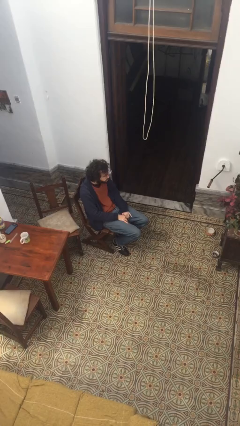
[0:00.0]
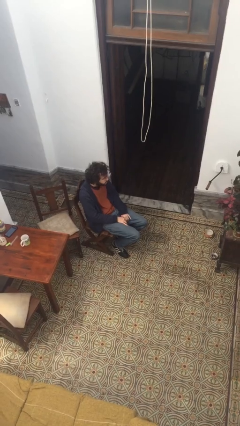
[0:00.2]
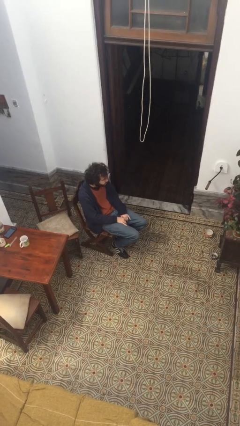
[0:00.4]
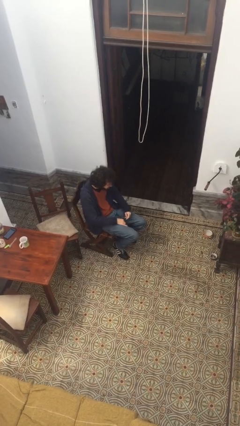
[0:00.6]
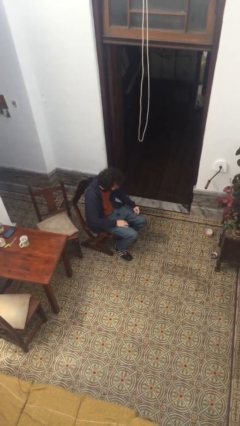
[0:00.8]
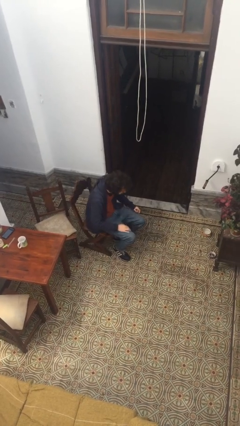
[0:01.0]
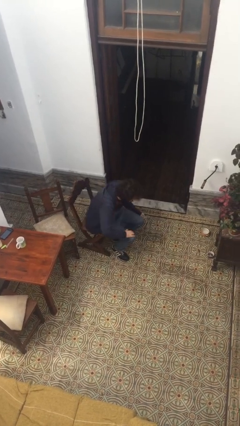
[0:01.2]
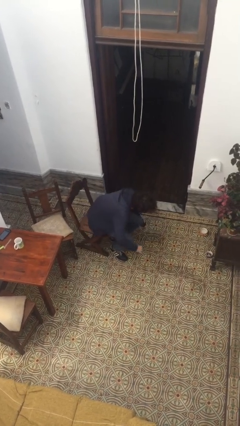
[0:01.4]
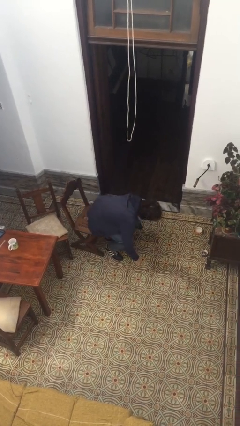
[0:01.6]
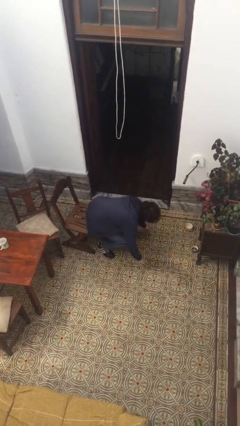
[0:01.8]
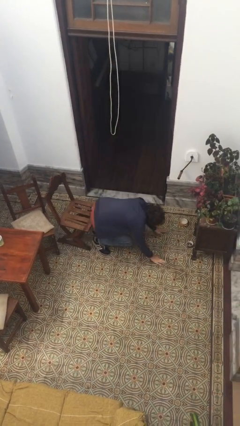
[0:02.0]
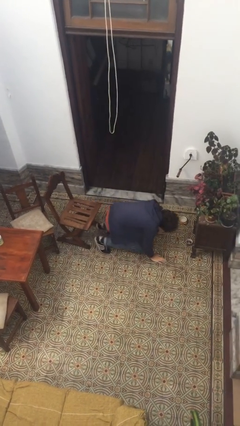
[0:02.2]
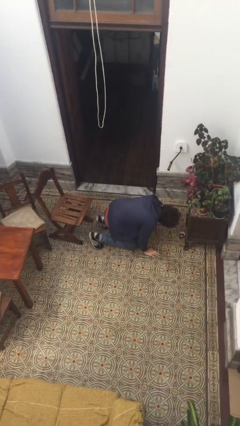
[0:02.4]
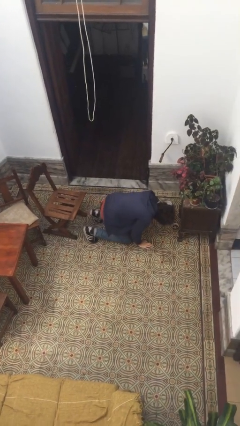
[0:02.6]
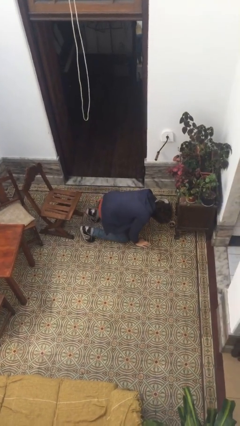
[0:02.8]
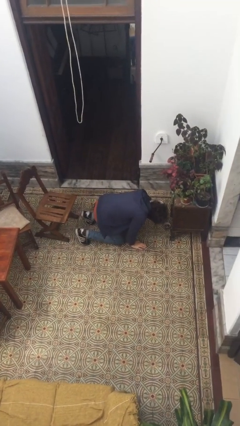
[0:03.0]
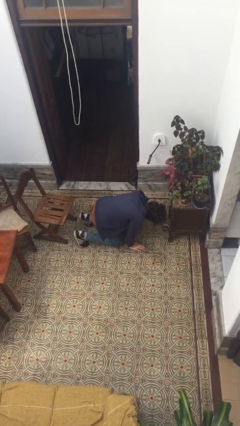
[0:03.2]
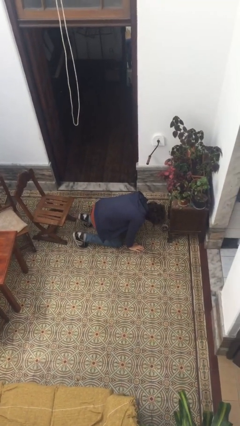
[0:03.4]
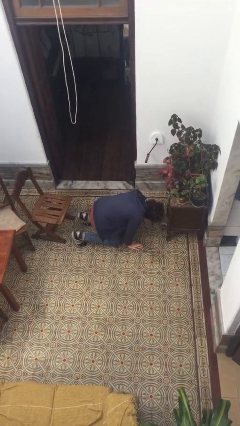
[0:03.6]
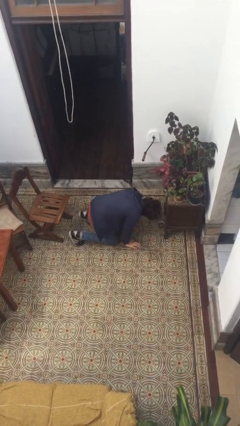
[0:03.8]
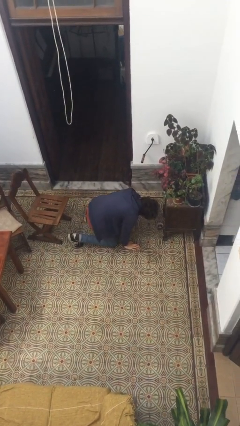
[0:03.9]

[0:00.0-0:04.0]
person falls from chair

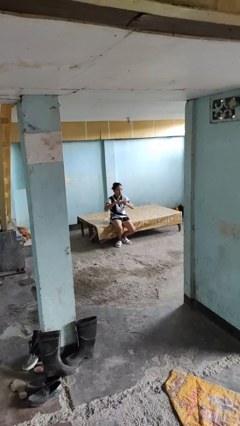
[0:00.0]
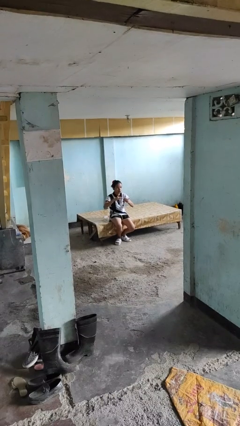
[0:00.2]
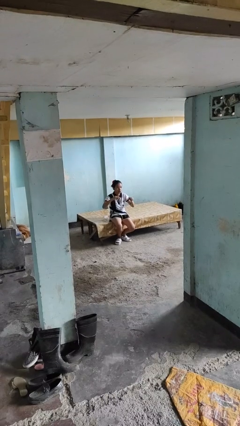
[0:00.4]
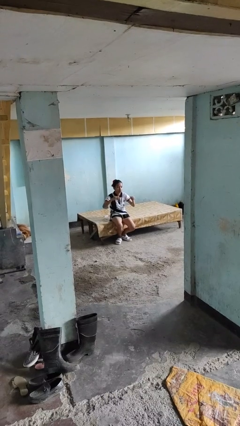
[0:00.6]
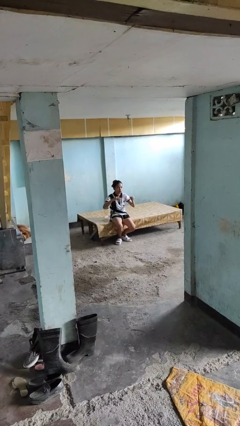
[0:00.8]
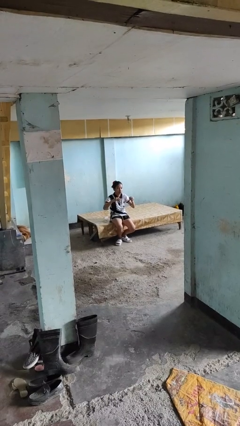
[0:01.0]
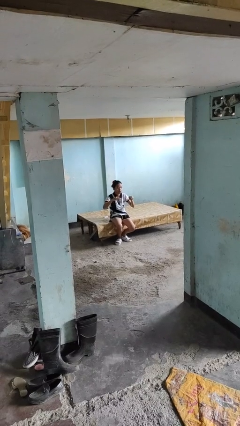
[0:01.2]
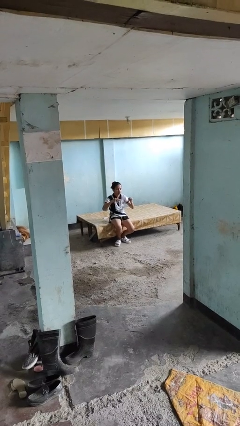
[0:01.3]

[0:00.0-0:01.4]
person takes off ring

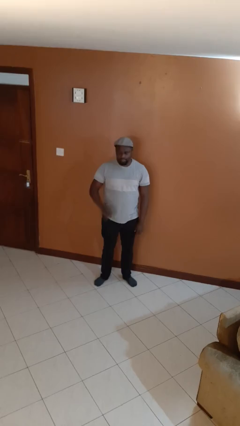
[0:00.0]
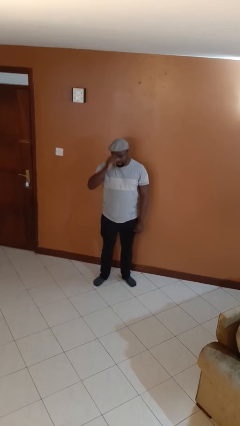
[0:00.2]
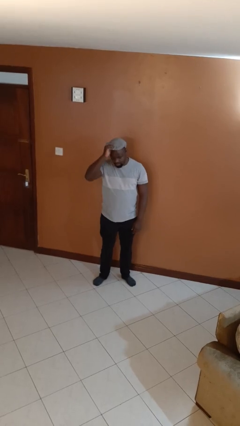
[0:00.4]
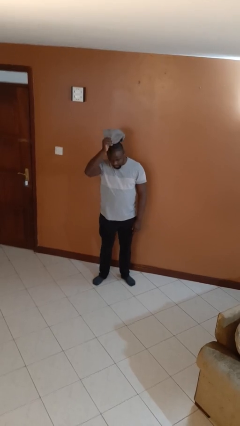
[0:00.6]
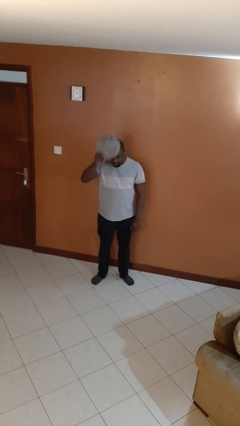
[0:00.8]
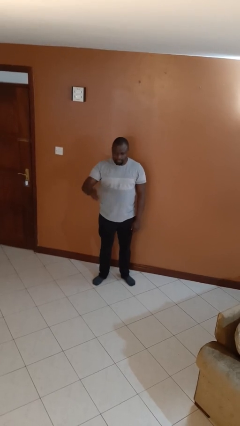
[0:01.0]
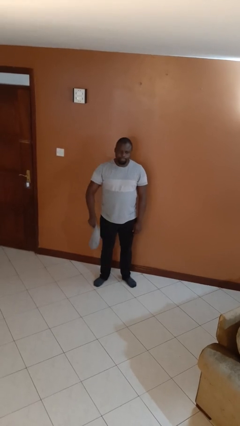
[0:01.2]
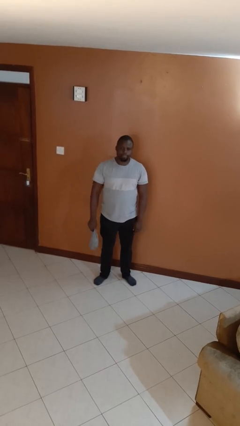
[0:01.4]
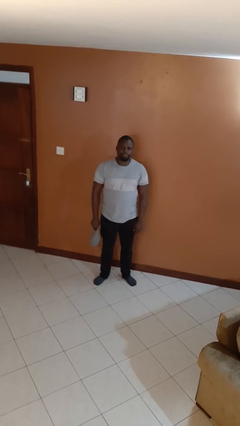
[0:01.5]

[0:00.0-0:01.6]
person takes off hat

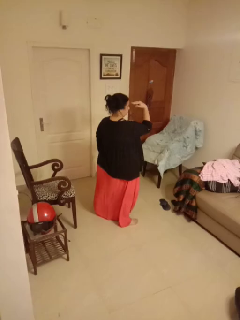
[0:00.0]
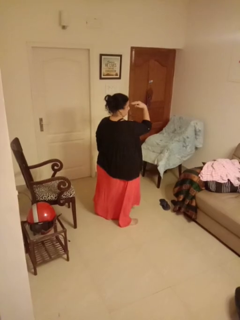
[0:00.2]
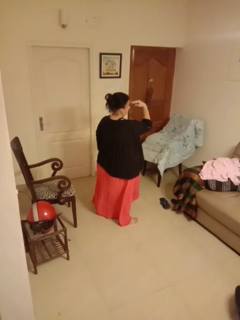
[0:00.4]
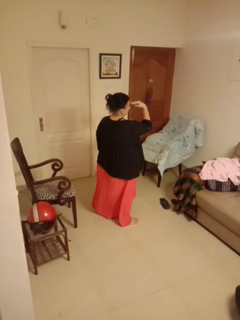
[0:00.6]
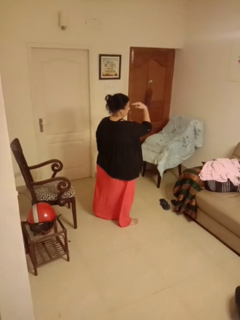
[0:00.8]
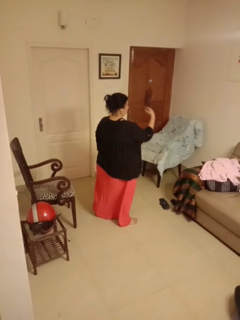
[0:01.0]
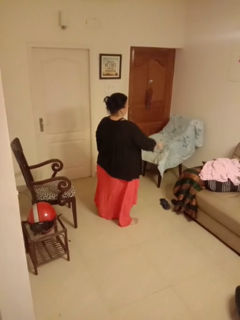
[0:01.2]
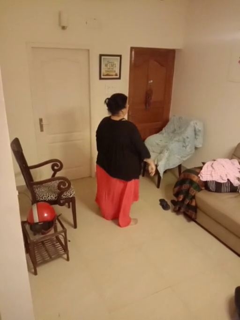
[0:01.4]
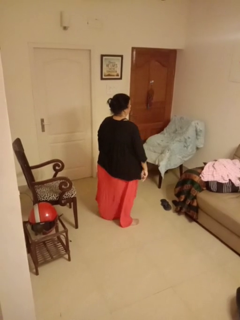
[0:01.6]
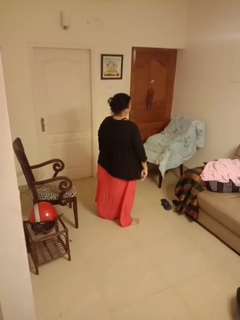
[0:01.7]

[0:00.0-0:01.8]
person gestures watch closely

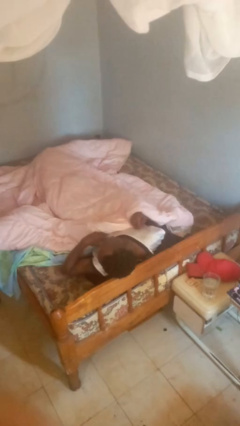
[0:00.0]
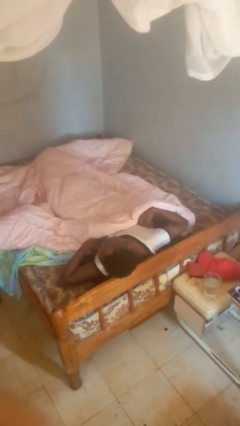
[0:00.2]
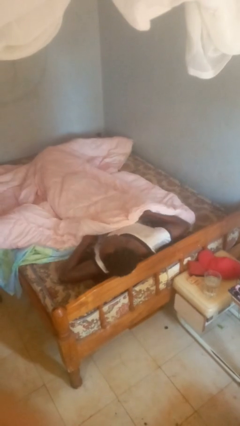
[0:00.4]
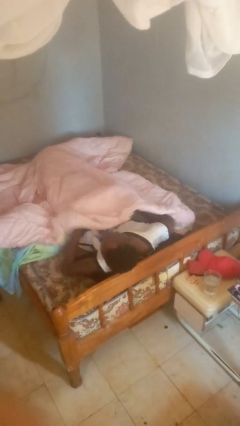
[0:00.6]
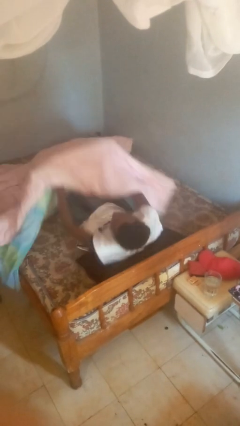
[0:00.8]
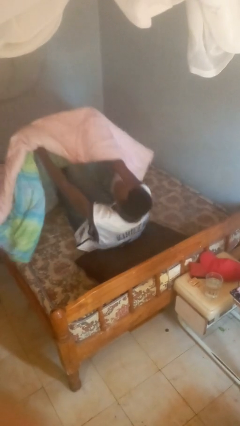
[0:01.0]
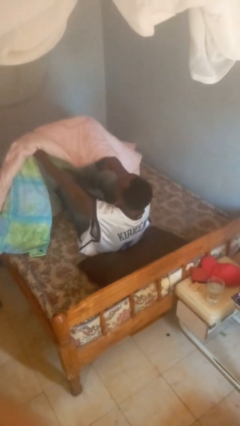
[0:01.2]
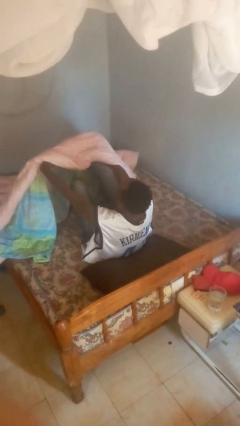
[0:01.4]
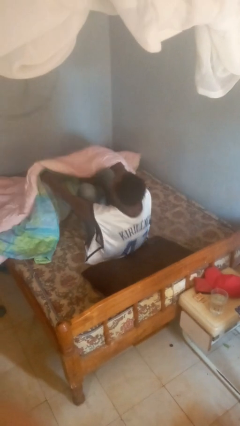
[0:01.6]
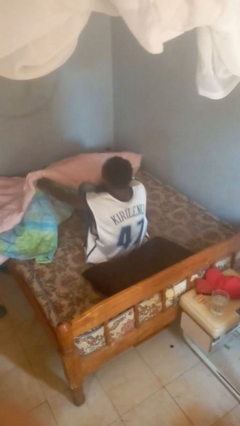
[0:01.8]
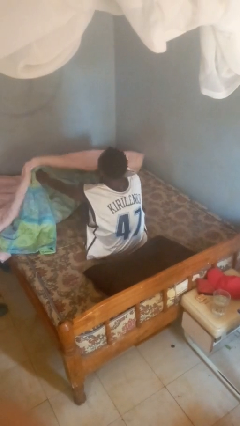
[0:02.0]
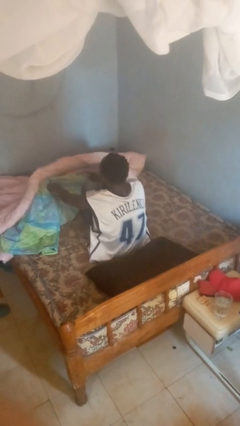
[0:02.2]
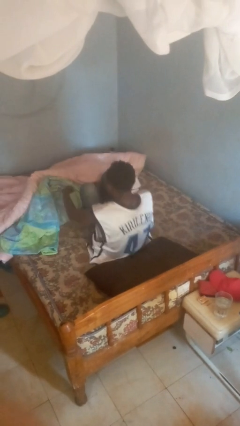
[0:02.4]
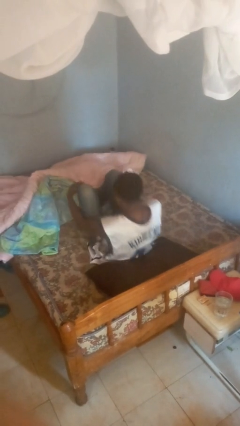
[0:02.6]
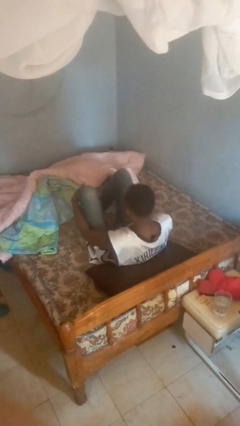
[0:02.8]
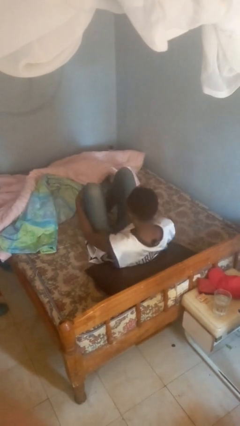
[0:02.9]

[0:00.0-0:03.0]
person uncovers with bedsheets

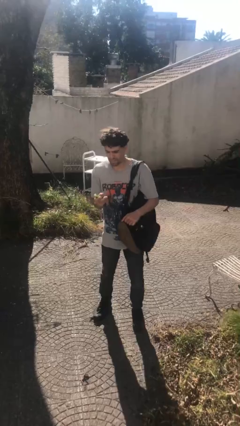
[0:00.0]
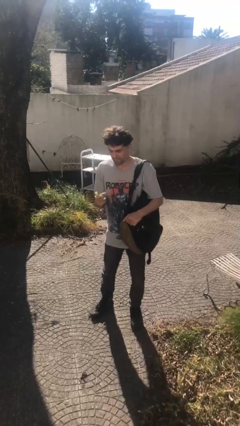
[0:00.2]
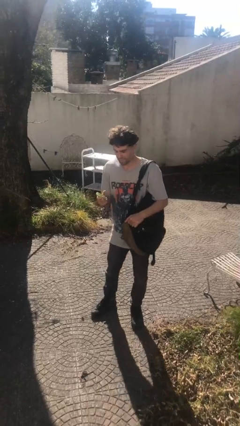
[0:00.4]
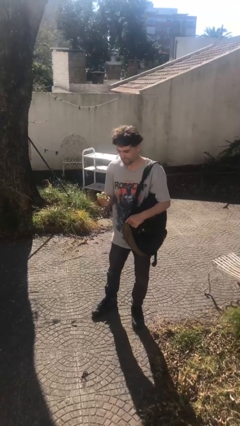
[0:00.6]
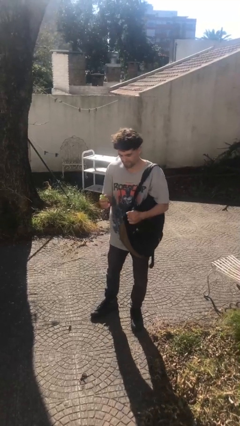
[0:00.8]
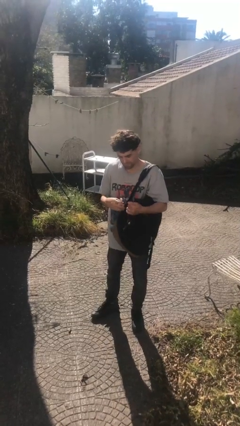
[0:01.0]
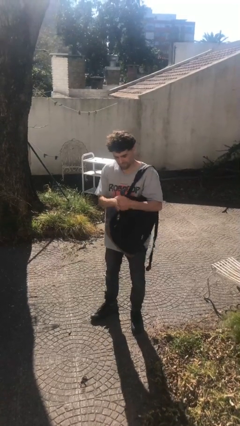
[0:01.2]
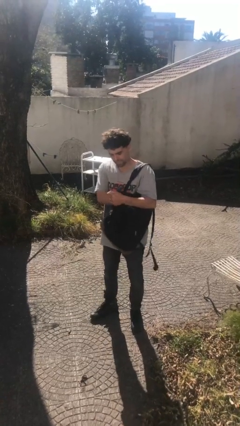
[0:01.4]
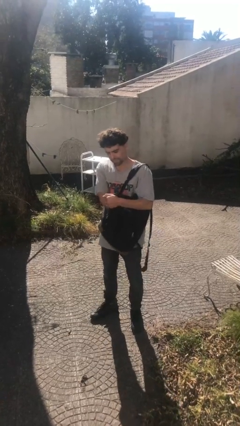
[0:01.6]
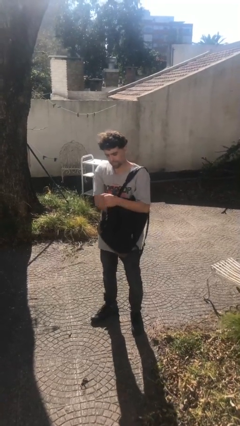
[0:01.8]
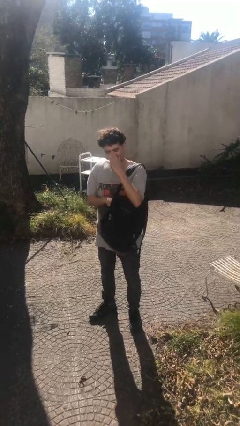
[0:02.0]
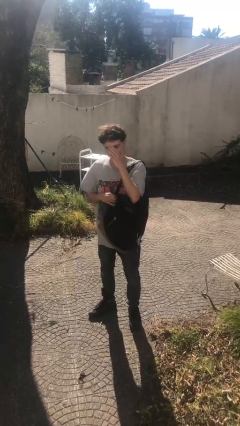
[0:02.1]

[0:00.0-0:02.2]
person puts object into backpack

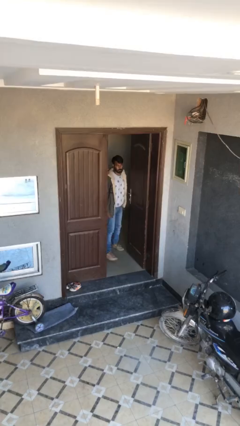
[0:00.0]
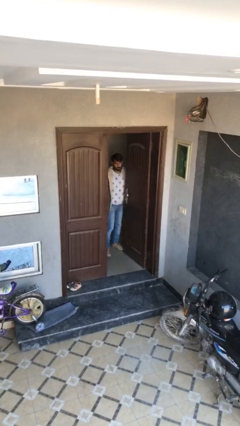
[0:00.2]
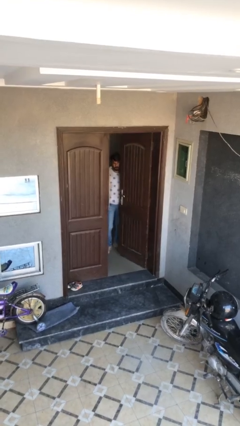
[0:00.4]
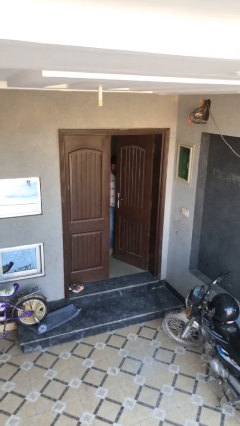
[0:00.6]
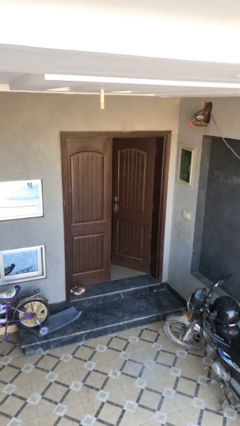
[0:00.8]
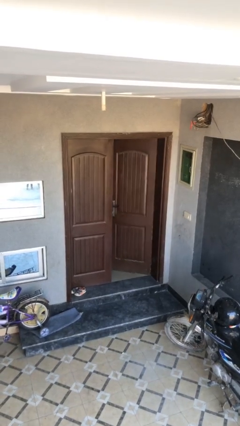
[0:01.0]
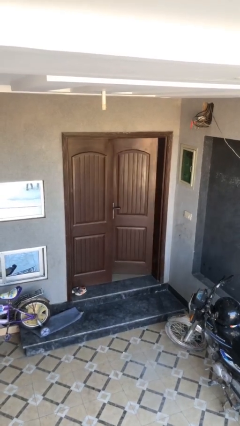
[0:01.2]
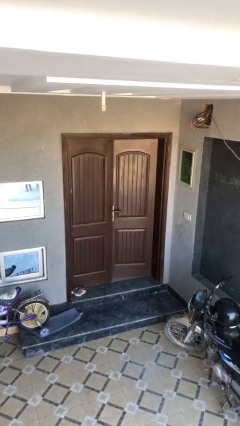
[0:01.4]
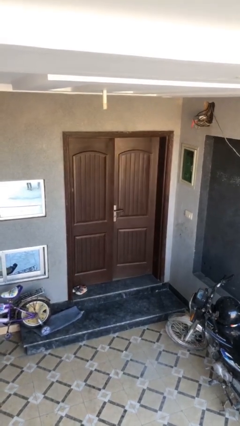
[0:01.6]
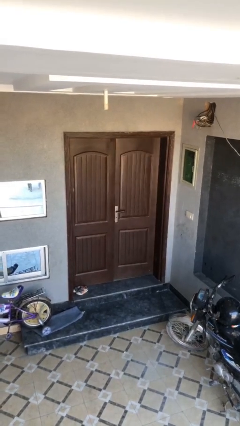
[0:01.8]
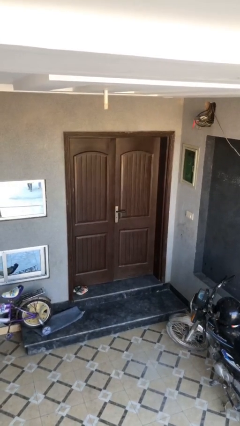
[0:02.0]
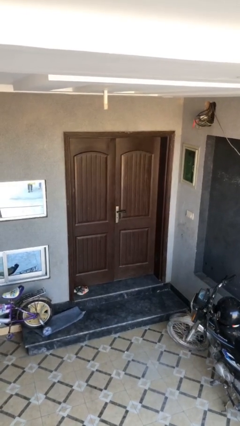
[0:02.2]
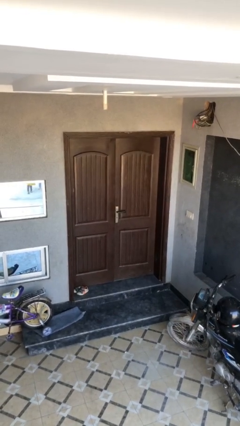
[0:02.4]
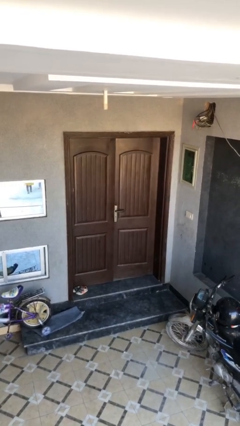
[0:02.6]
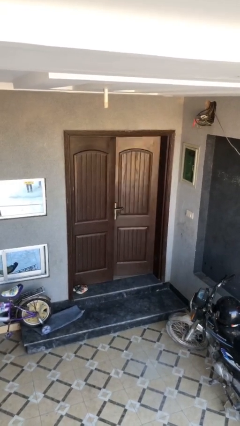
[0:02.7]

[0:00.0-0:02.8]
person closes facility door

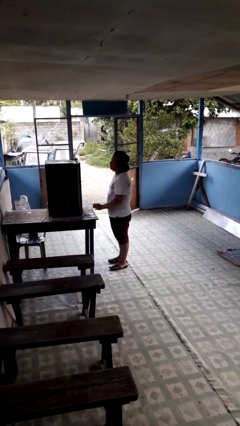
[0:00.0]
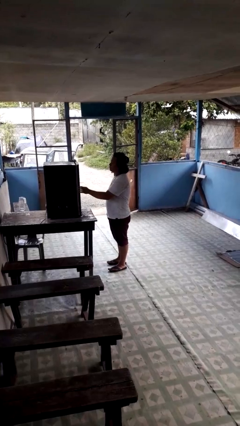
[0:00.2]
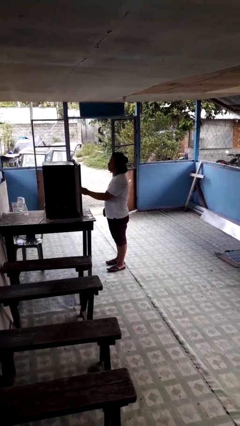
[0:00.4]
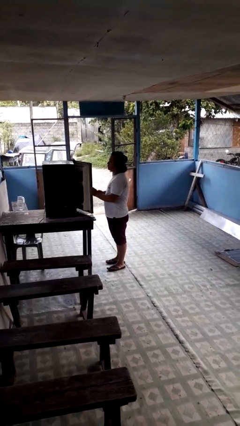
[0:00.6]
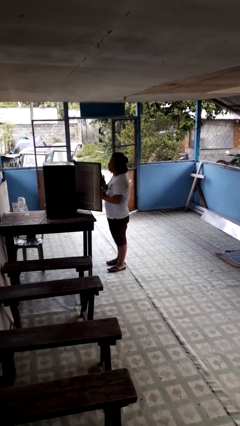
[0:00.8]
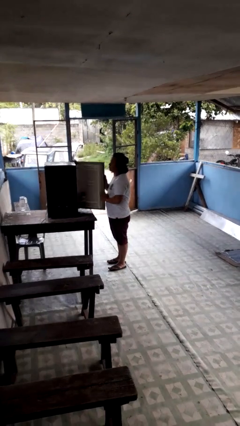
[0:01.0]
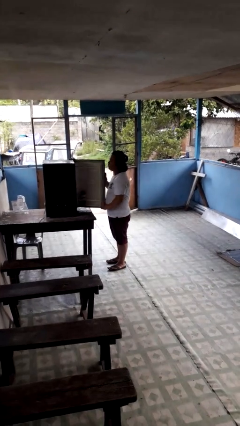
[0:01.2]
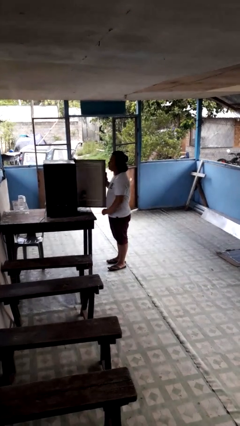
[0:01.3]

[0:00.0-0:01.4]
person opens refrigerator
